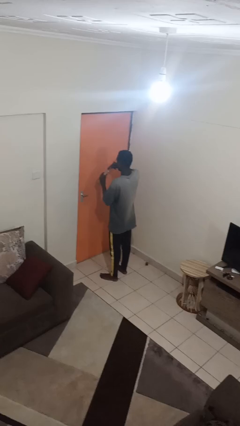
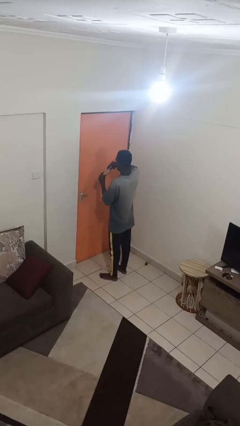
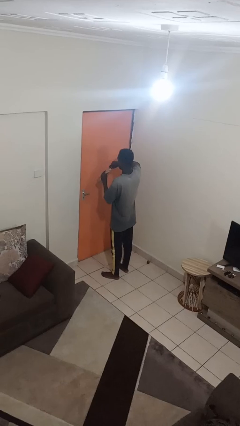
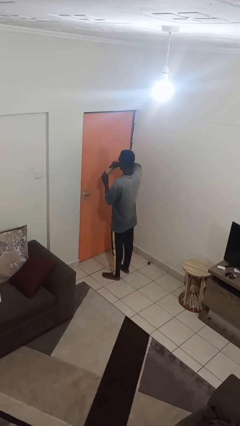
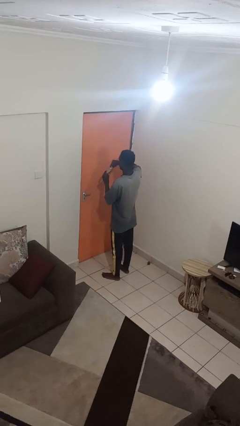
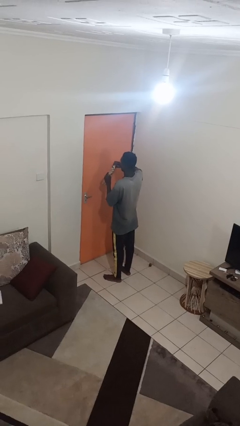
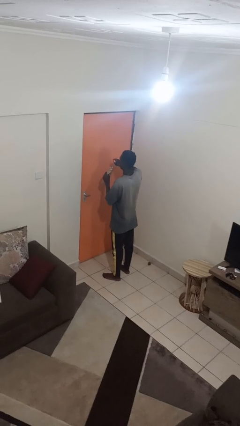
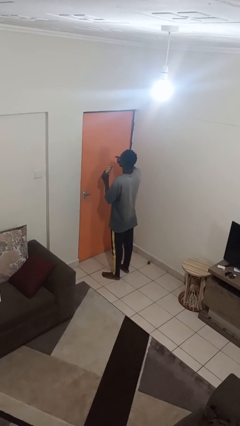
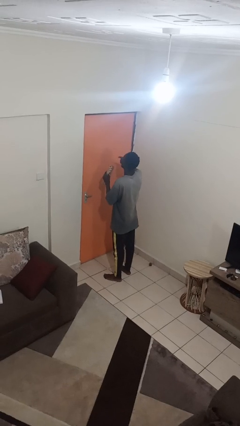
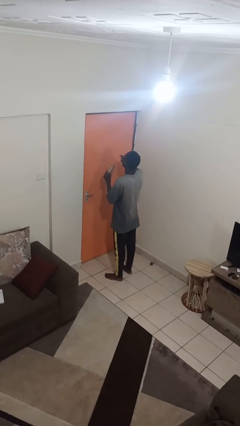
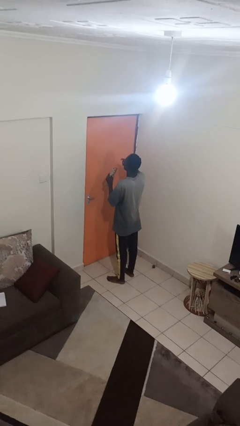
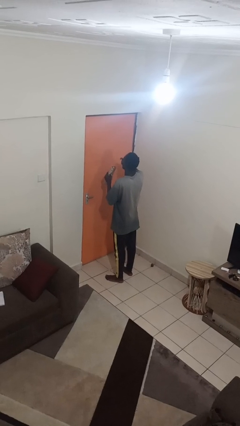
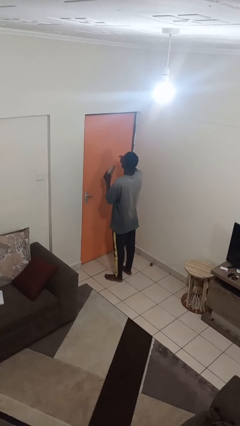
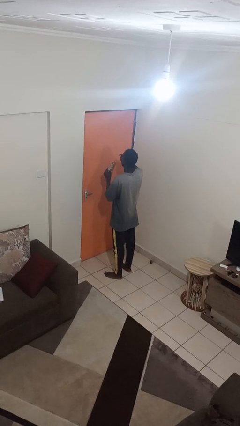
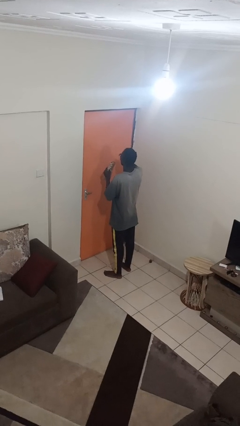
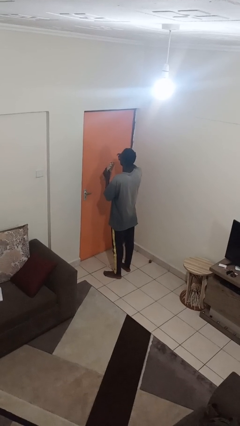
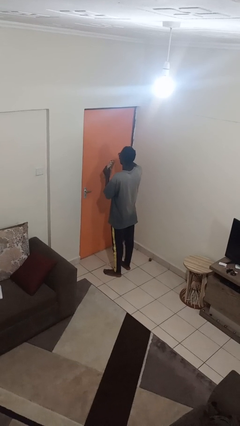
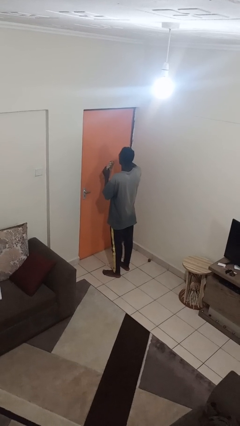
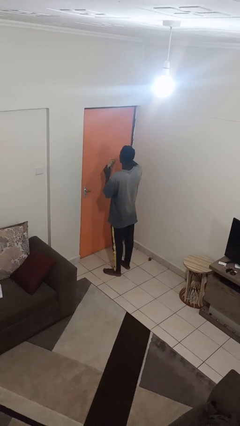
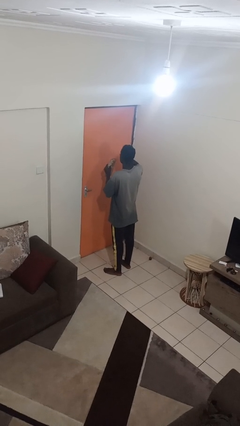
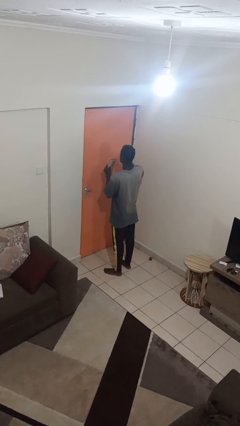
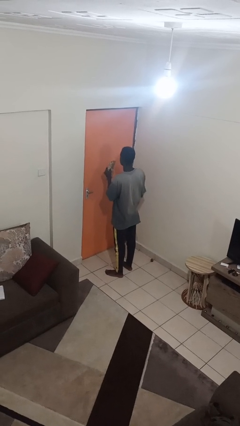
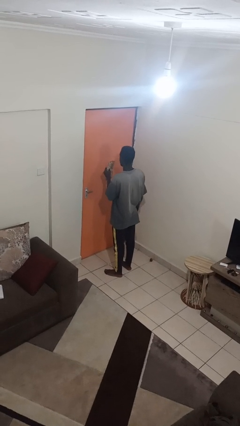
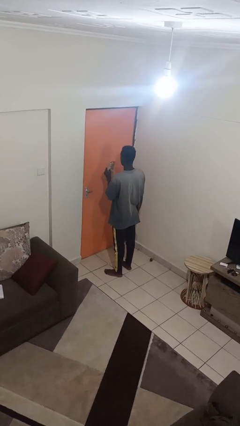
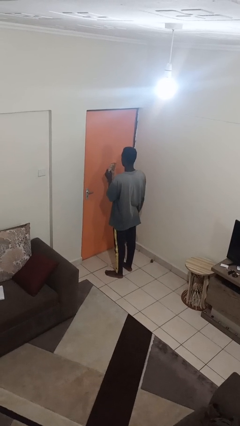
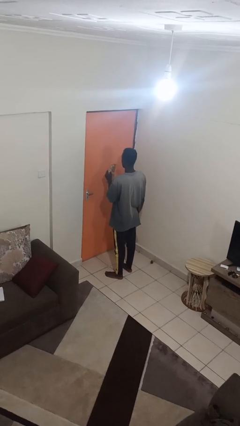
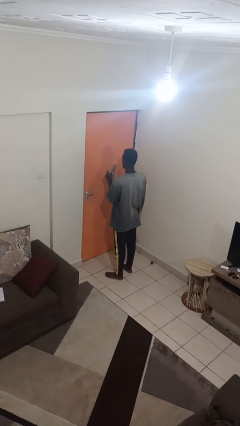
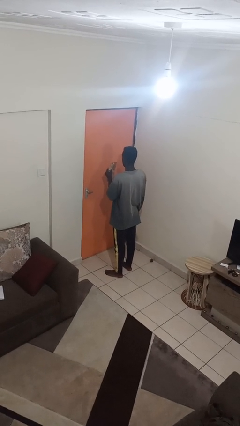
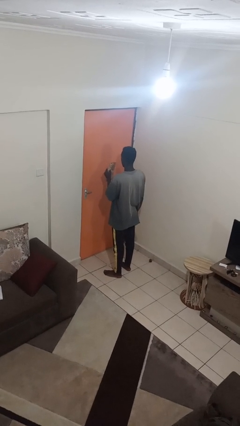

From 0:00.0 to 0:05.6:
person eats snack from bag

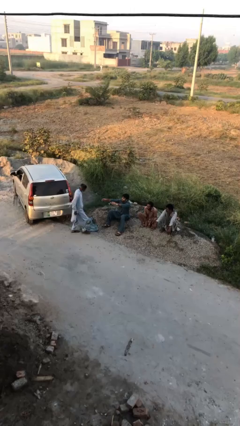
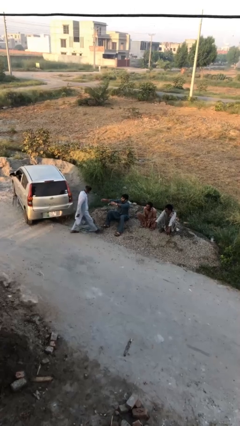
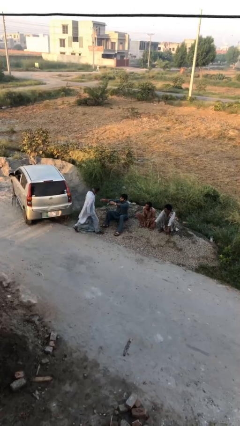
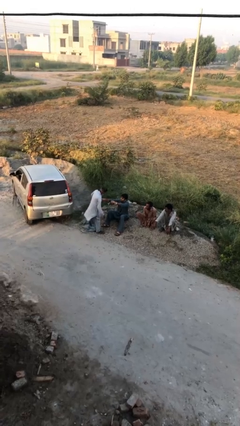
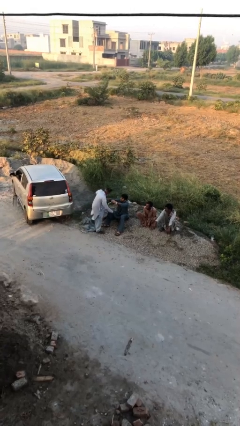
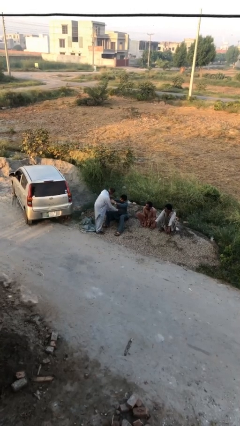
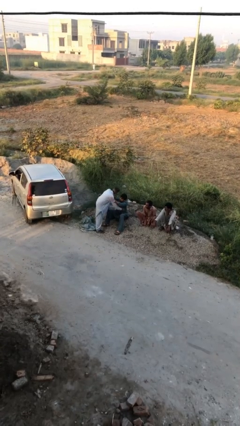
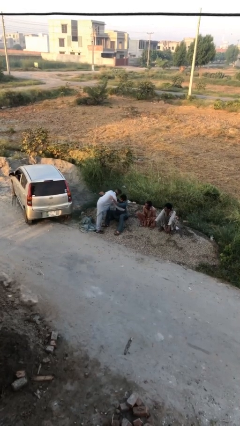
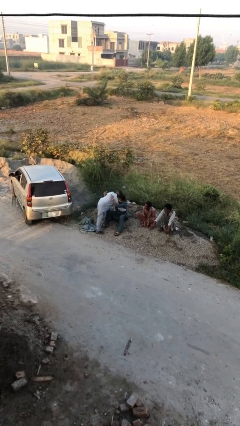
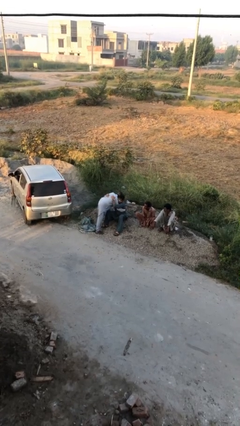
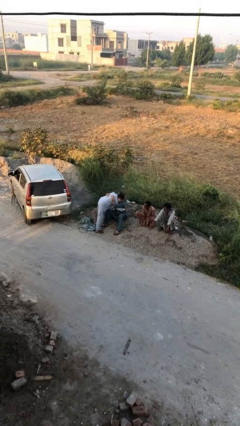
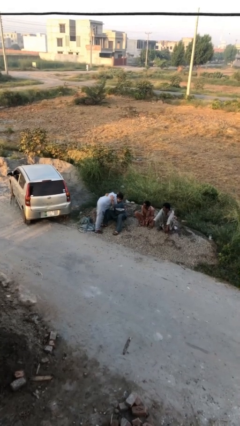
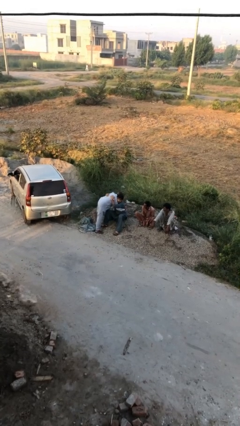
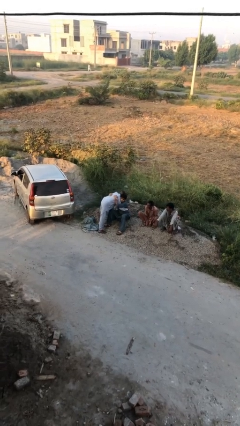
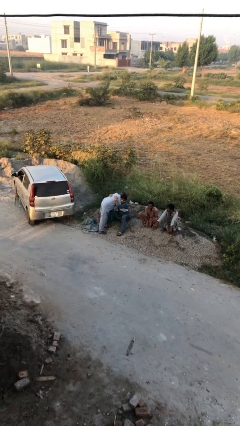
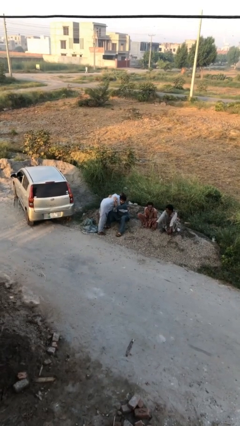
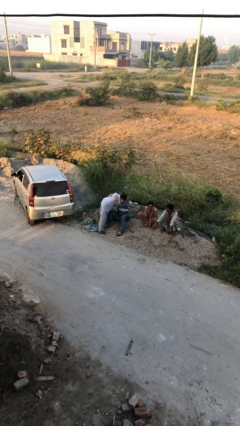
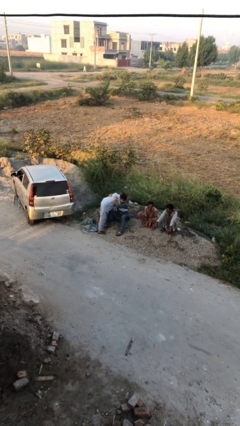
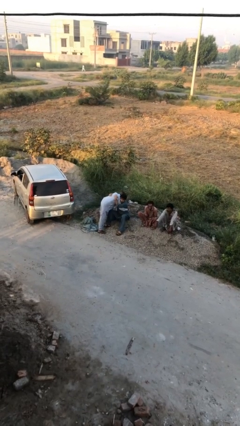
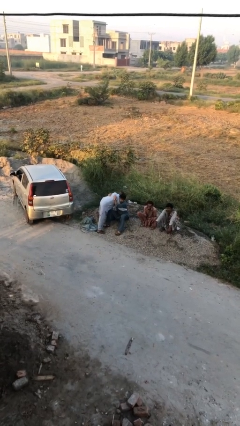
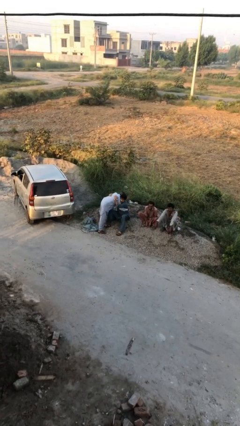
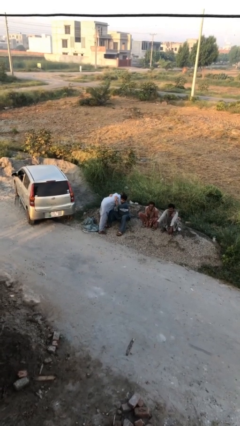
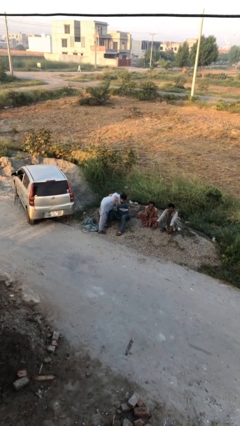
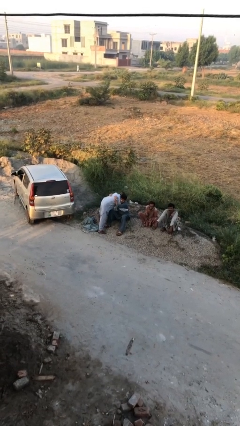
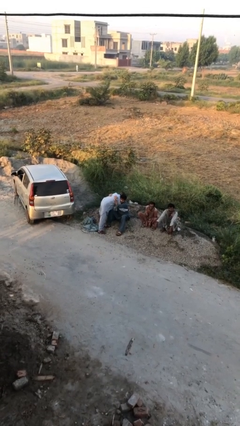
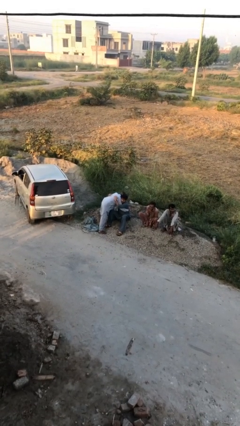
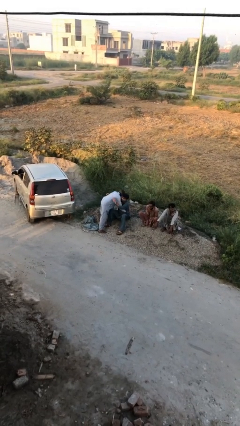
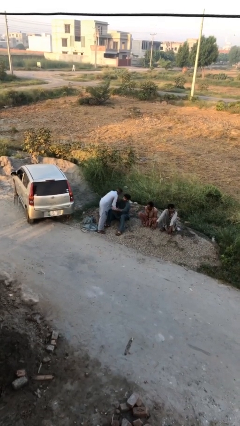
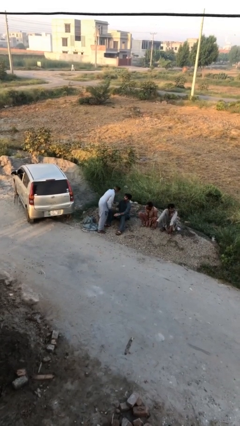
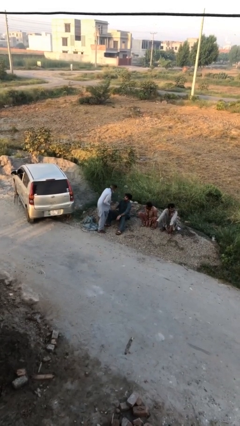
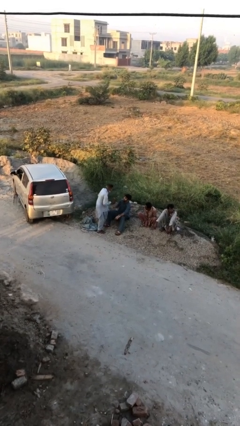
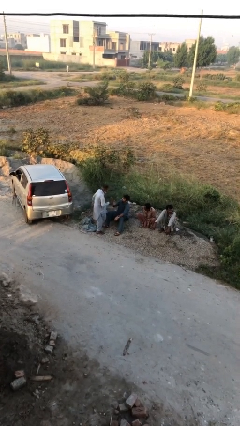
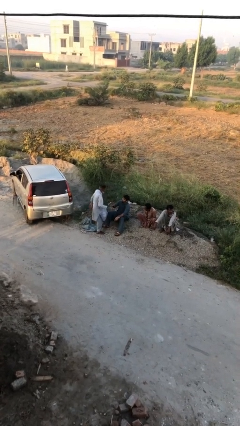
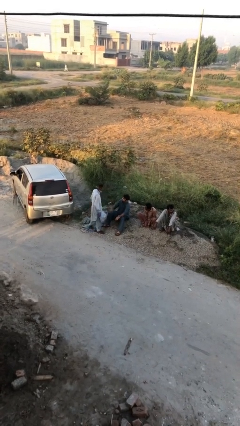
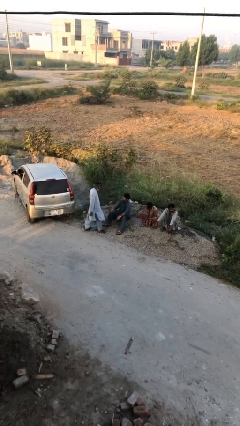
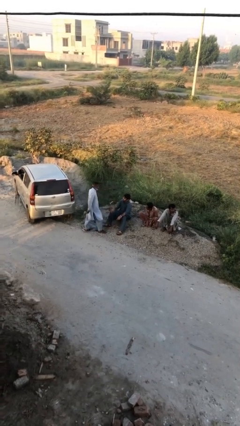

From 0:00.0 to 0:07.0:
person embraces person

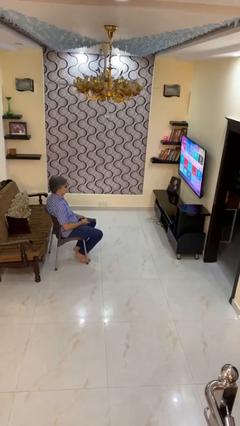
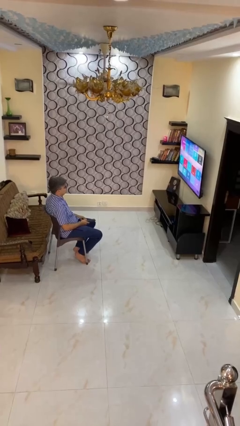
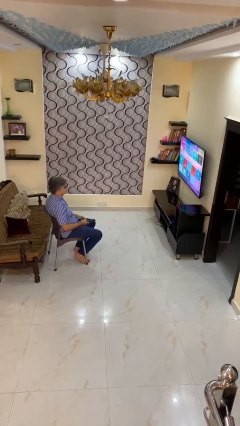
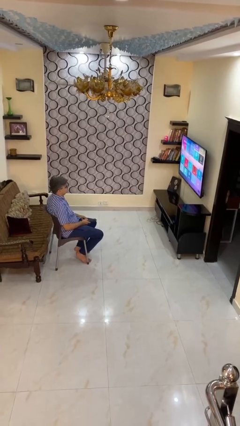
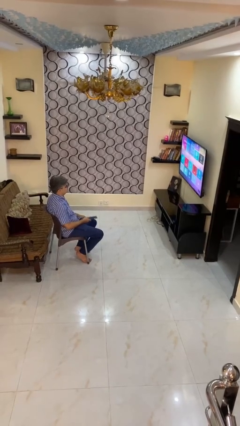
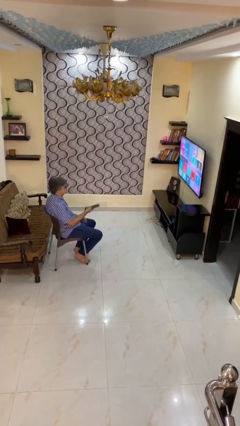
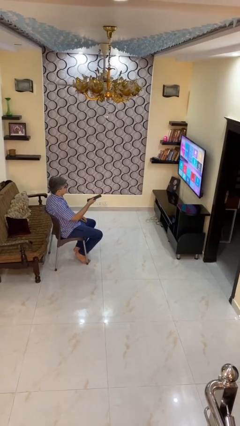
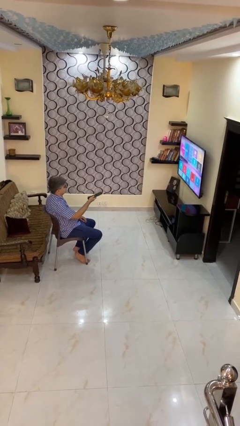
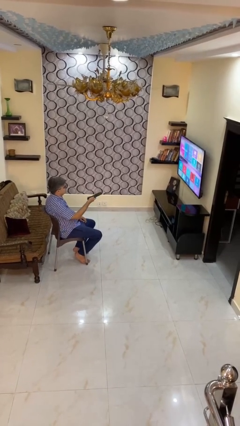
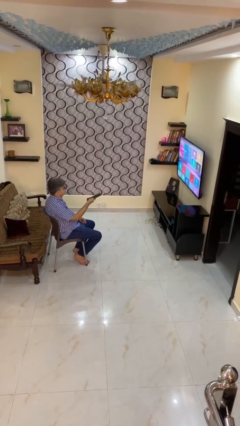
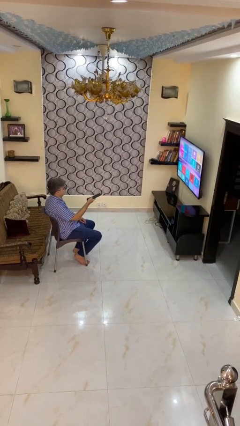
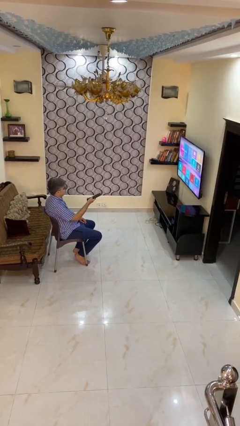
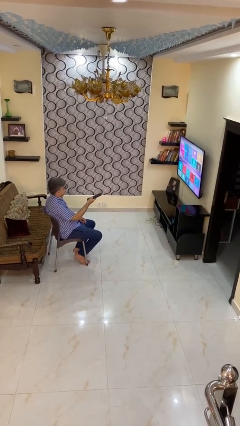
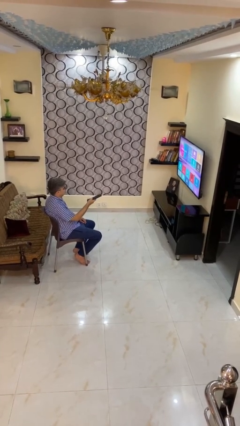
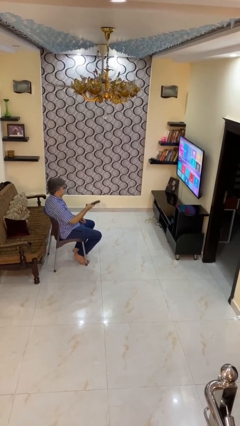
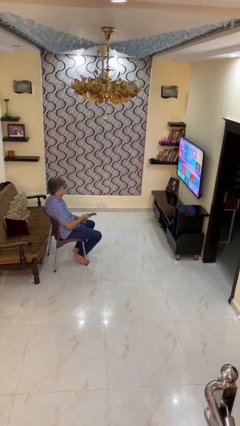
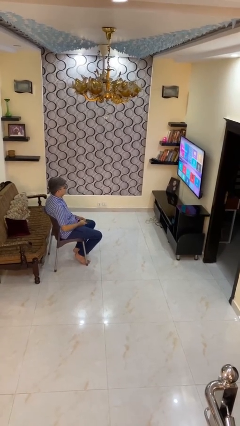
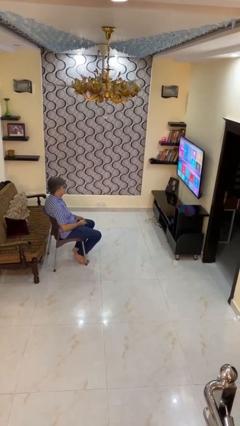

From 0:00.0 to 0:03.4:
person uses television remote

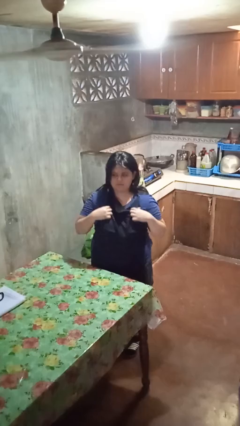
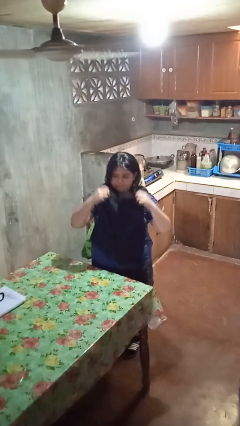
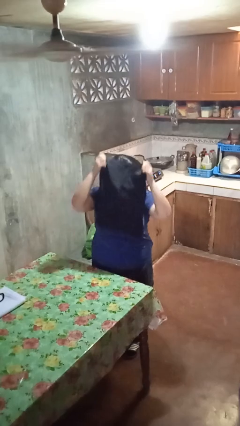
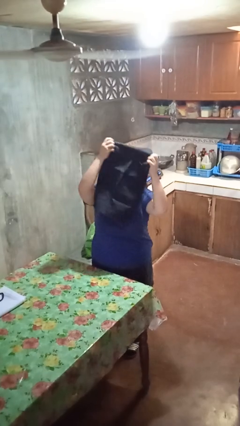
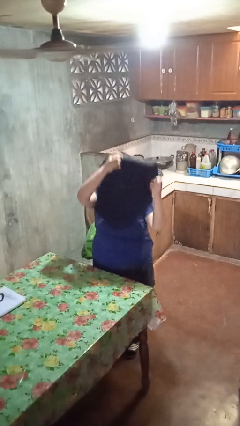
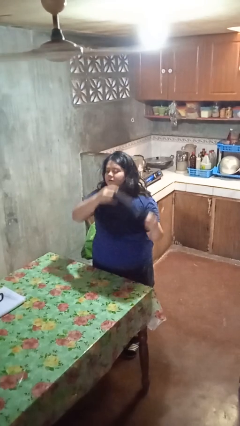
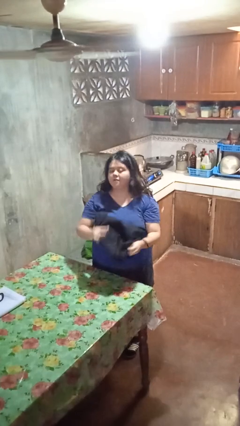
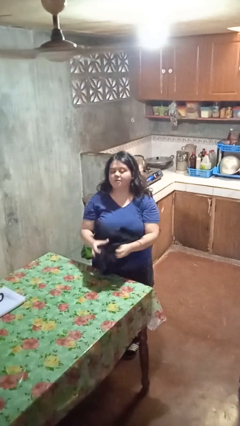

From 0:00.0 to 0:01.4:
person takes off apron

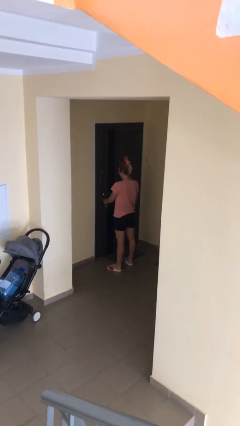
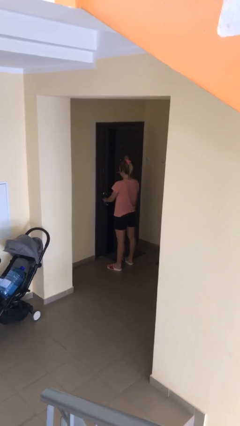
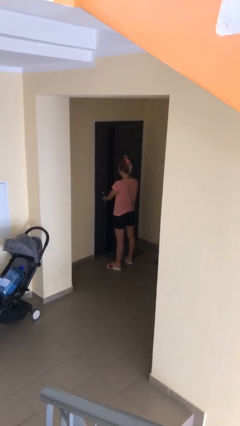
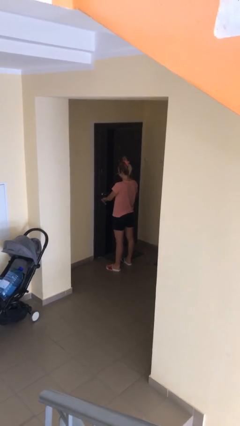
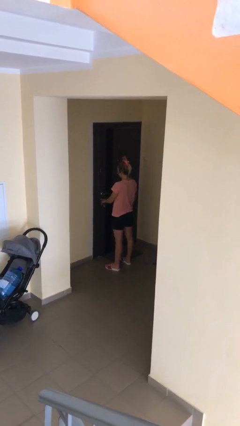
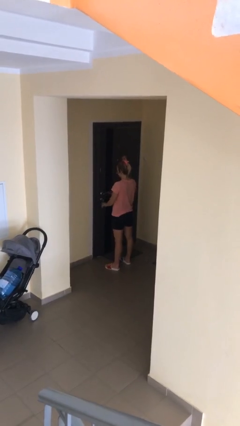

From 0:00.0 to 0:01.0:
person unlocks door with keys
